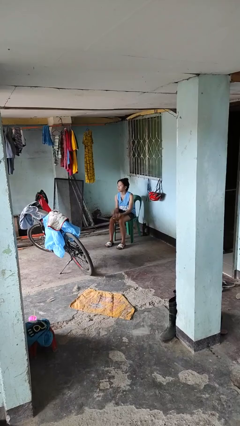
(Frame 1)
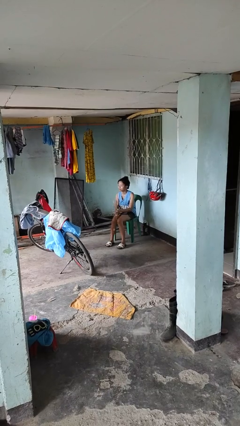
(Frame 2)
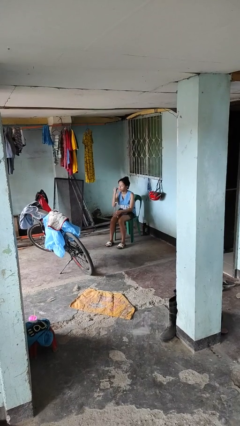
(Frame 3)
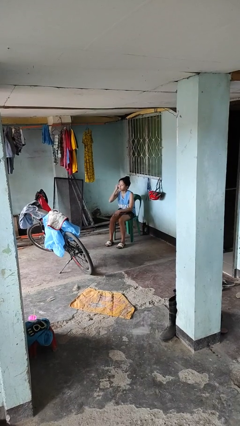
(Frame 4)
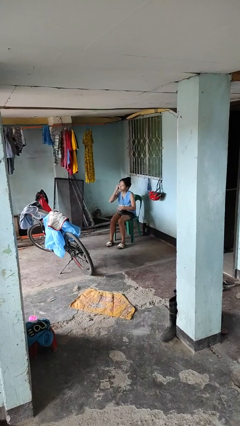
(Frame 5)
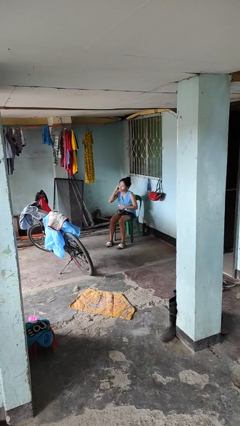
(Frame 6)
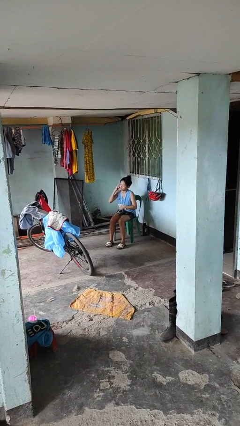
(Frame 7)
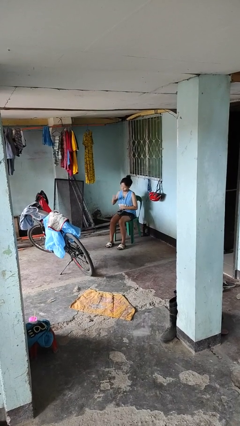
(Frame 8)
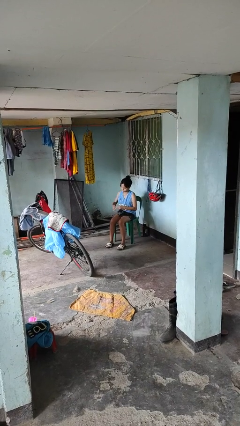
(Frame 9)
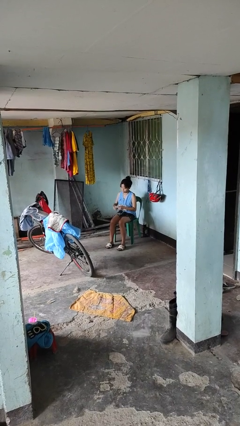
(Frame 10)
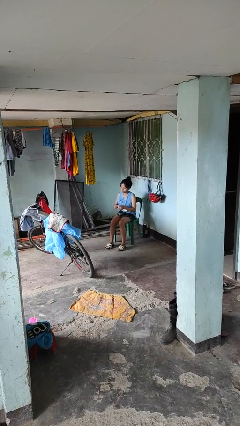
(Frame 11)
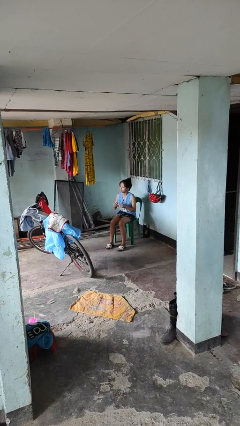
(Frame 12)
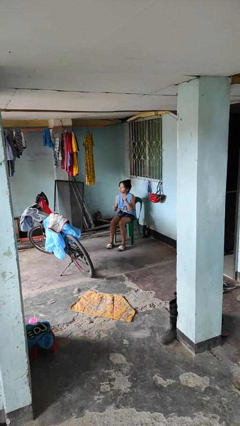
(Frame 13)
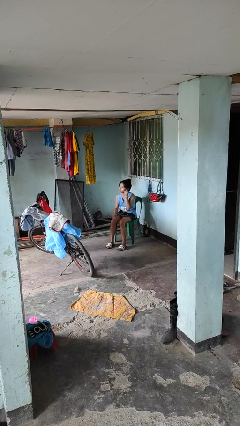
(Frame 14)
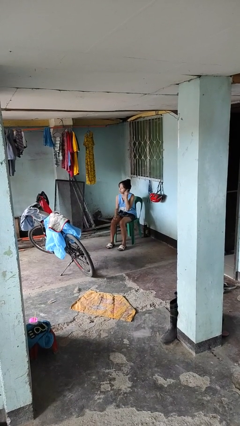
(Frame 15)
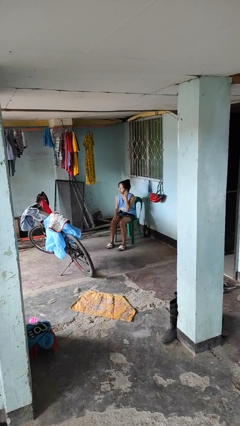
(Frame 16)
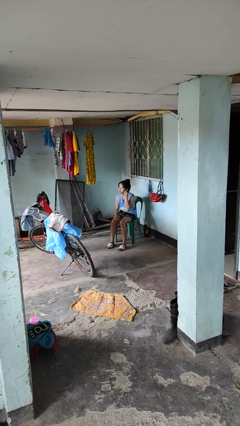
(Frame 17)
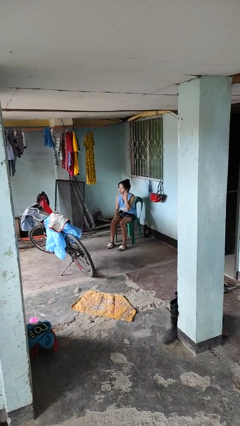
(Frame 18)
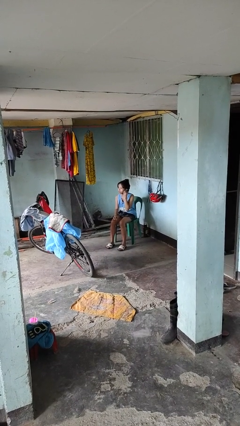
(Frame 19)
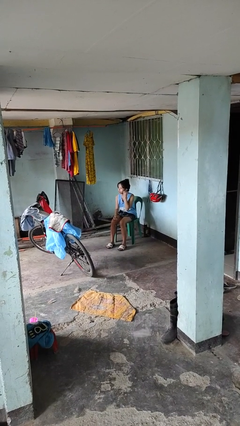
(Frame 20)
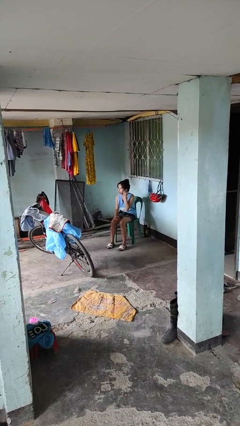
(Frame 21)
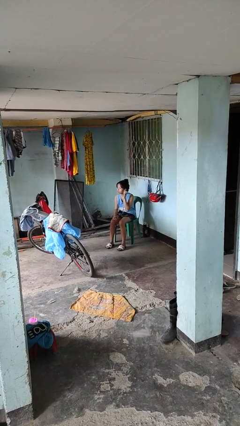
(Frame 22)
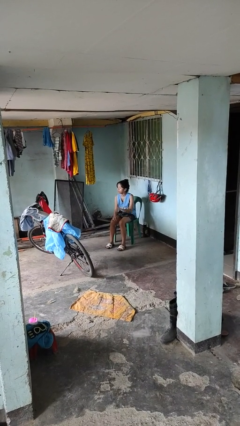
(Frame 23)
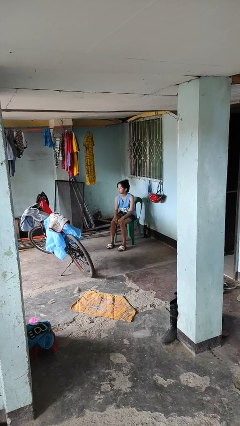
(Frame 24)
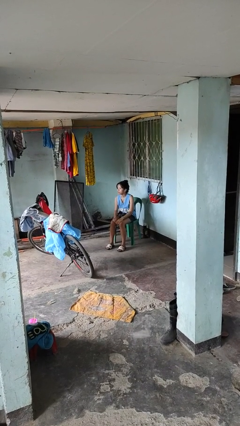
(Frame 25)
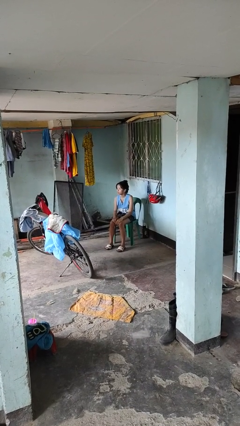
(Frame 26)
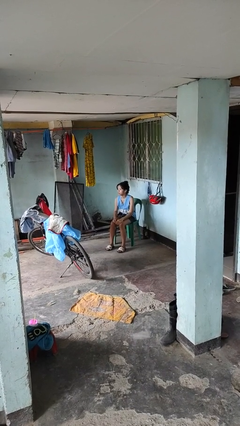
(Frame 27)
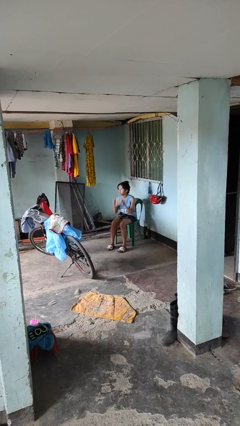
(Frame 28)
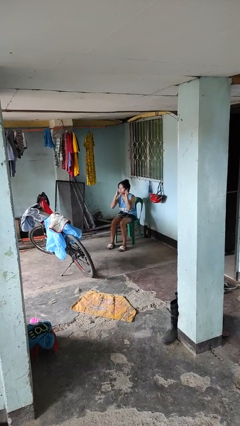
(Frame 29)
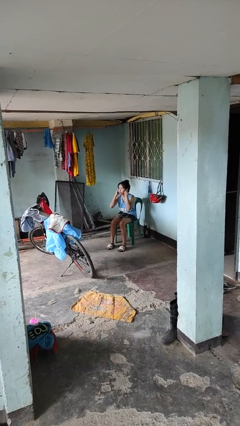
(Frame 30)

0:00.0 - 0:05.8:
person puts on headphones

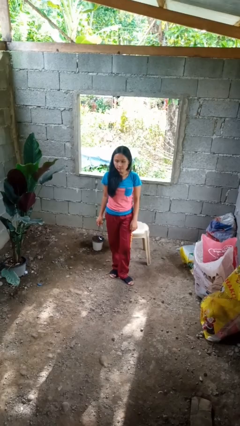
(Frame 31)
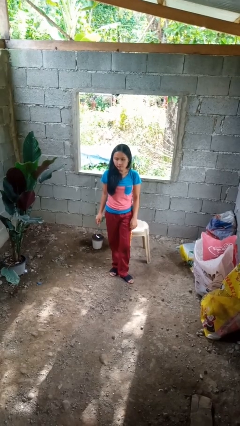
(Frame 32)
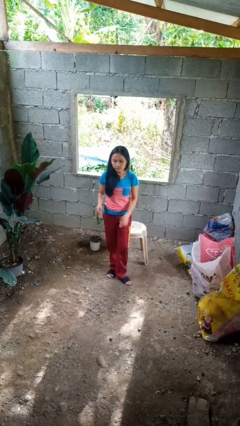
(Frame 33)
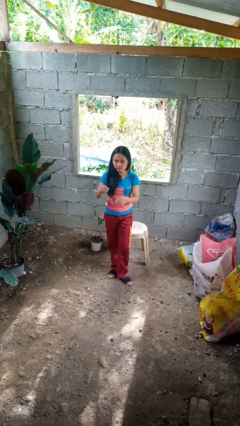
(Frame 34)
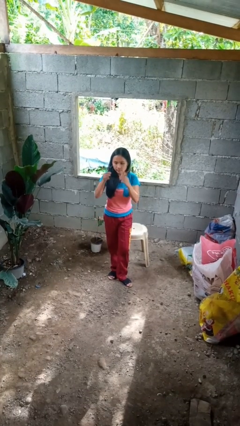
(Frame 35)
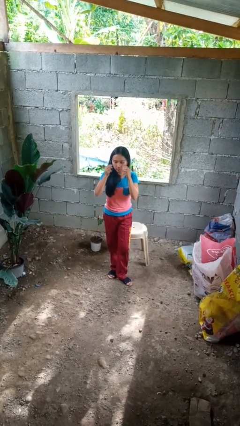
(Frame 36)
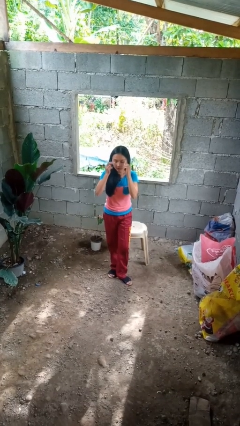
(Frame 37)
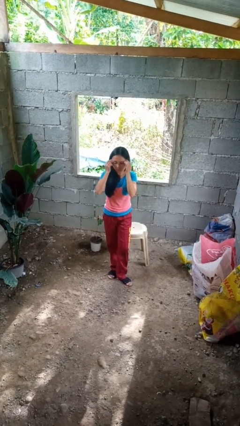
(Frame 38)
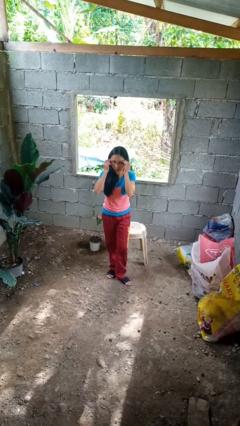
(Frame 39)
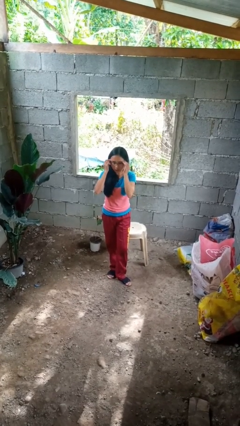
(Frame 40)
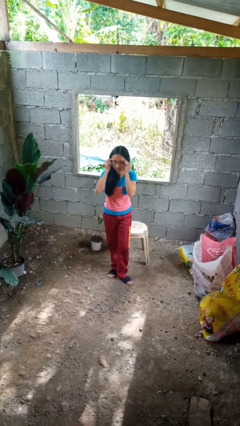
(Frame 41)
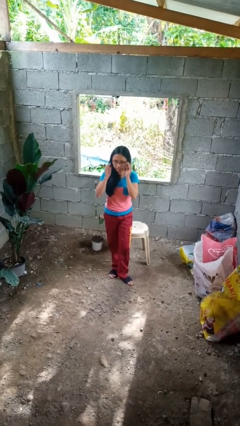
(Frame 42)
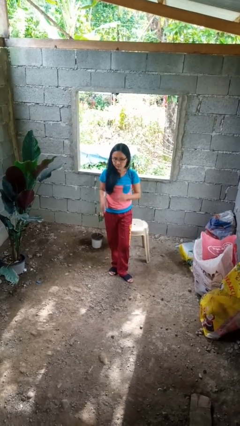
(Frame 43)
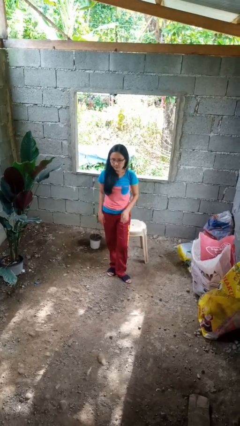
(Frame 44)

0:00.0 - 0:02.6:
person puts on glasses

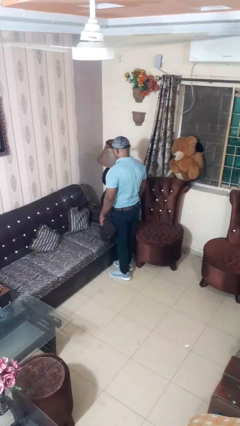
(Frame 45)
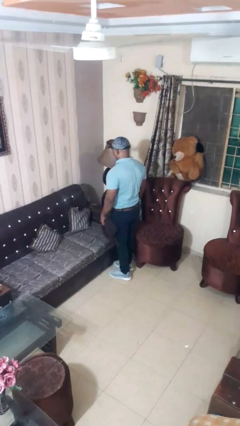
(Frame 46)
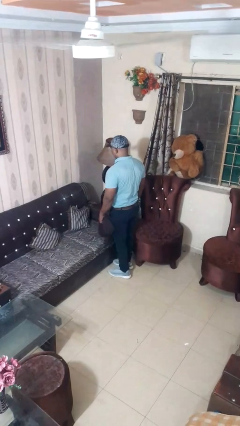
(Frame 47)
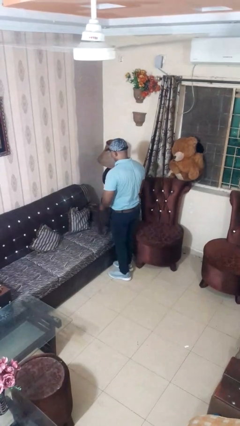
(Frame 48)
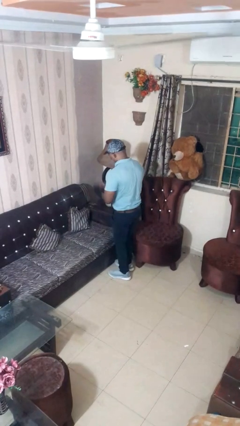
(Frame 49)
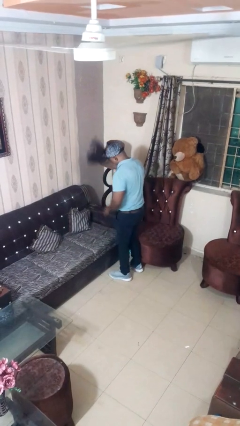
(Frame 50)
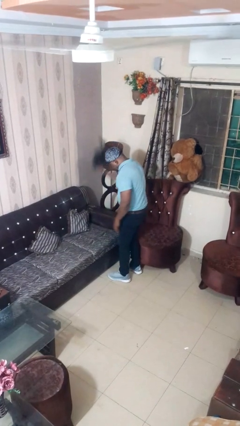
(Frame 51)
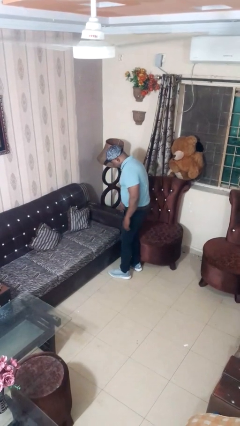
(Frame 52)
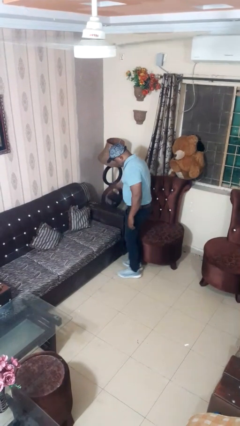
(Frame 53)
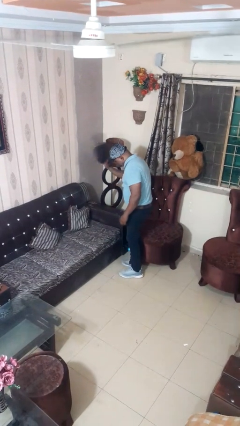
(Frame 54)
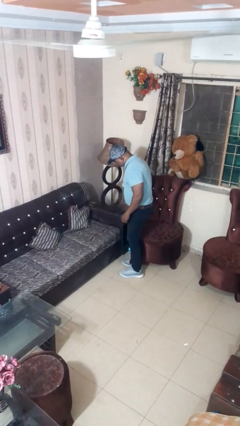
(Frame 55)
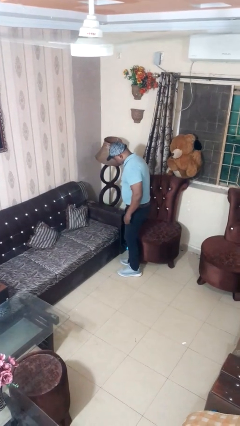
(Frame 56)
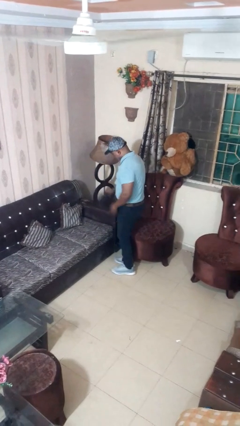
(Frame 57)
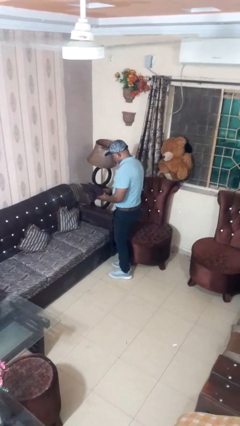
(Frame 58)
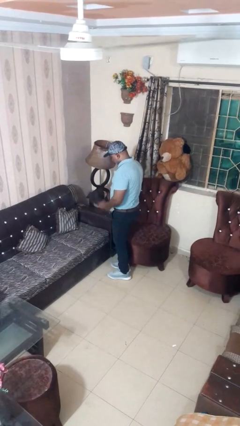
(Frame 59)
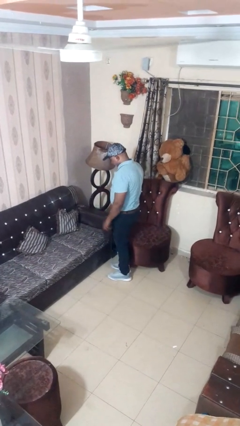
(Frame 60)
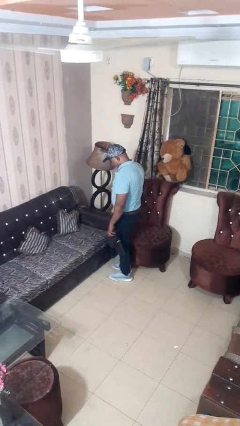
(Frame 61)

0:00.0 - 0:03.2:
person dusts furniture

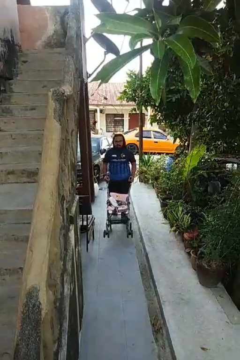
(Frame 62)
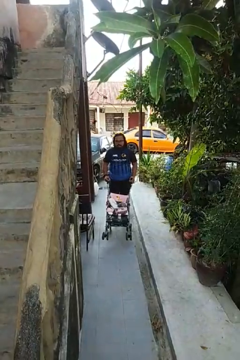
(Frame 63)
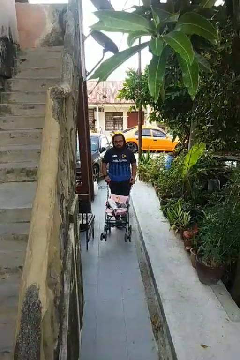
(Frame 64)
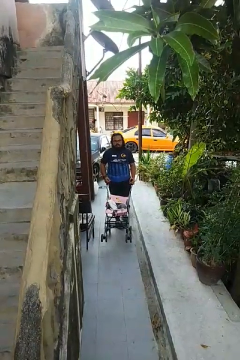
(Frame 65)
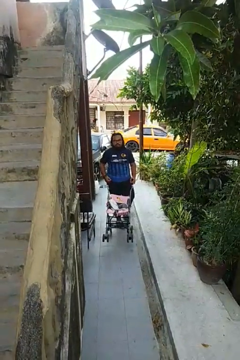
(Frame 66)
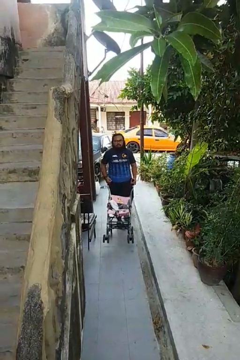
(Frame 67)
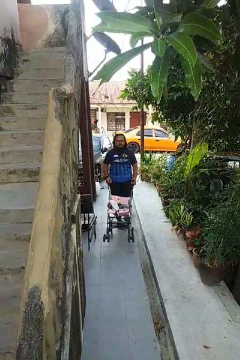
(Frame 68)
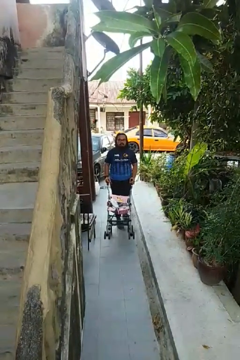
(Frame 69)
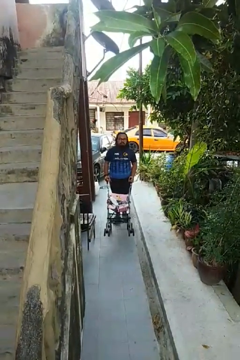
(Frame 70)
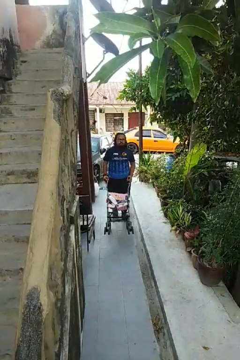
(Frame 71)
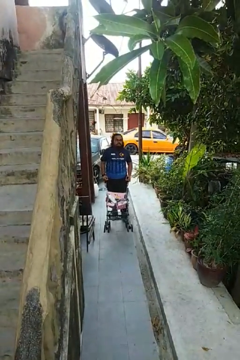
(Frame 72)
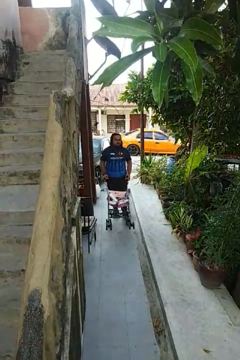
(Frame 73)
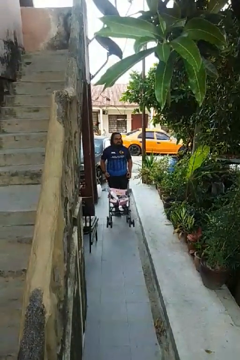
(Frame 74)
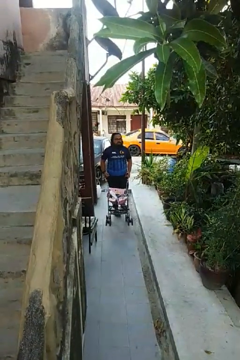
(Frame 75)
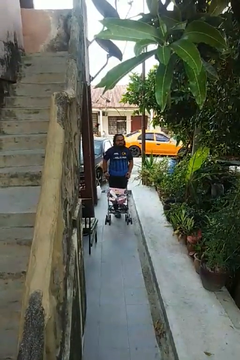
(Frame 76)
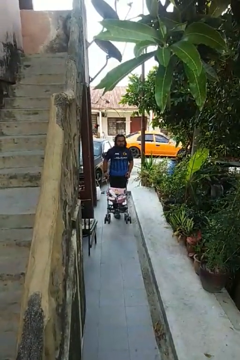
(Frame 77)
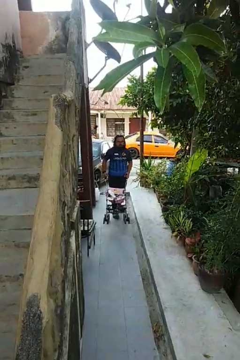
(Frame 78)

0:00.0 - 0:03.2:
person pulls wheeled cart

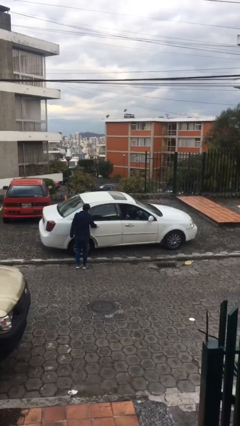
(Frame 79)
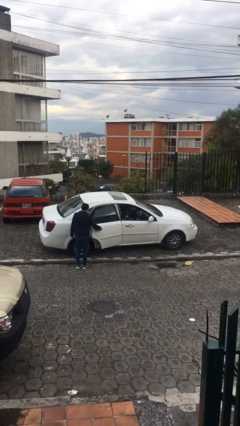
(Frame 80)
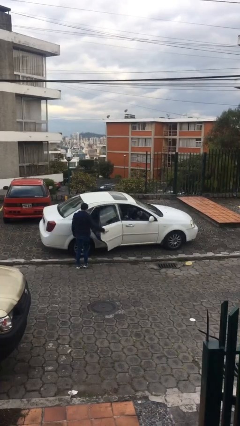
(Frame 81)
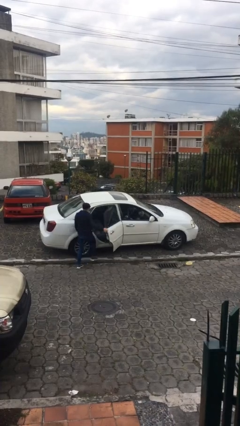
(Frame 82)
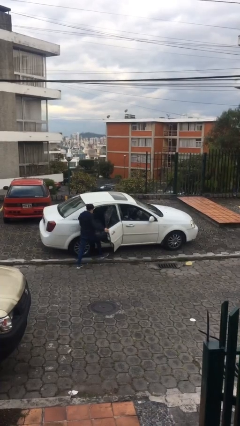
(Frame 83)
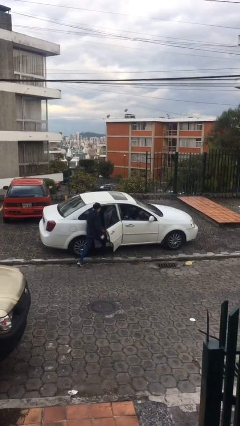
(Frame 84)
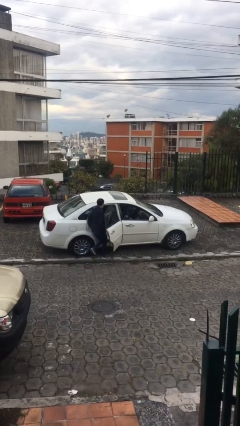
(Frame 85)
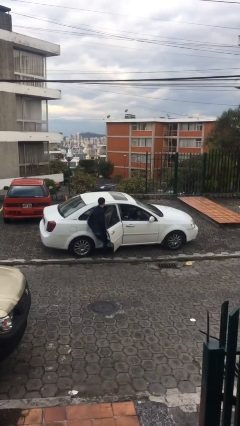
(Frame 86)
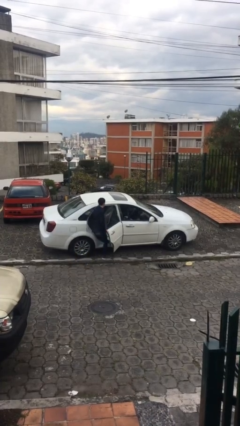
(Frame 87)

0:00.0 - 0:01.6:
car picks up person

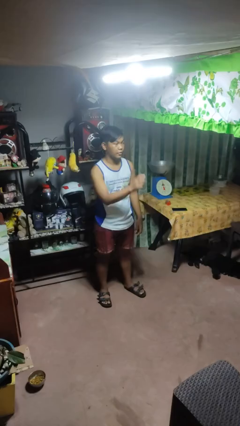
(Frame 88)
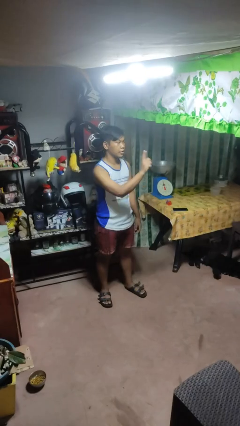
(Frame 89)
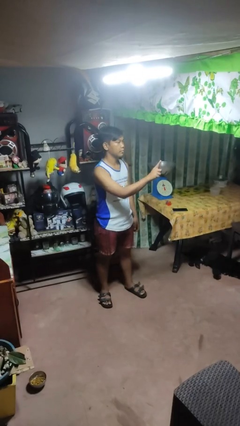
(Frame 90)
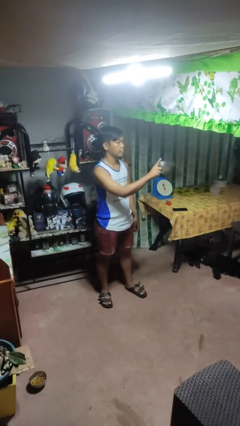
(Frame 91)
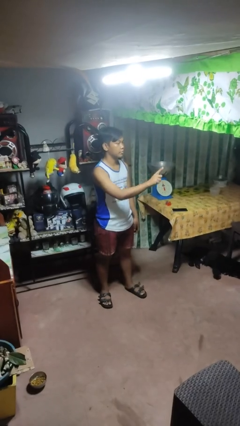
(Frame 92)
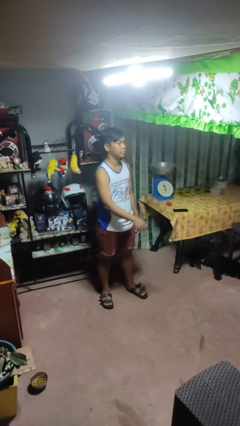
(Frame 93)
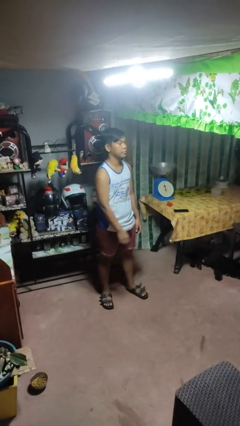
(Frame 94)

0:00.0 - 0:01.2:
person gestures number one

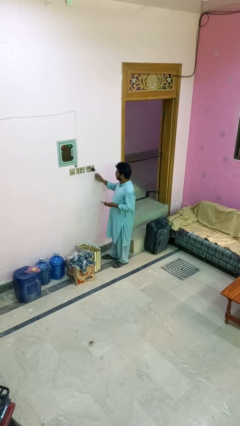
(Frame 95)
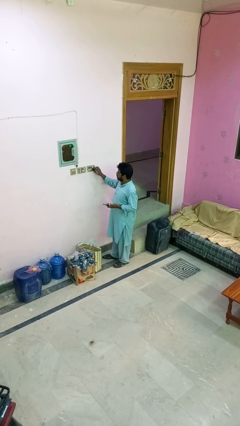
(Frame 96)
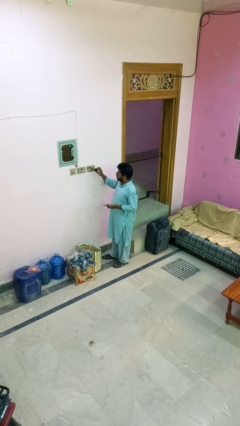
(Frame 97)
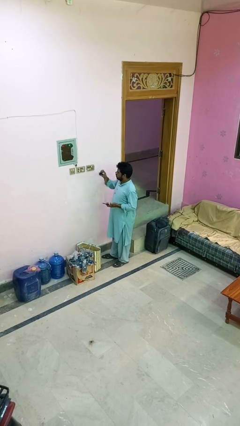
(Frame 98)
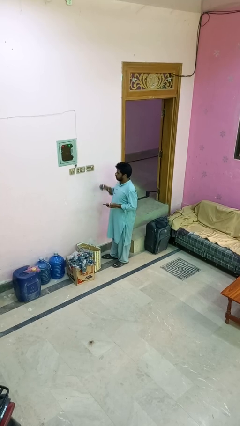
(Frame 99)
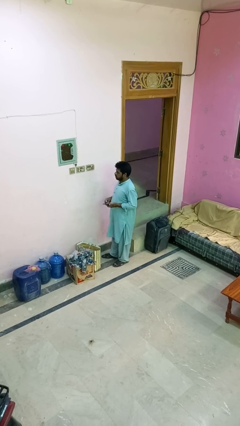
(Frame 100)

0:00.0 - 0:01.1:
person unplugs from electrical socket
